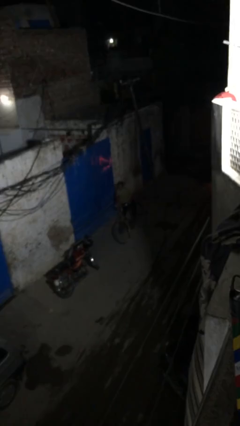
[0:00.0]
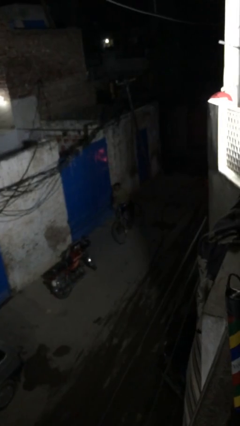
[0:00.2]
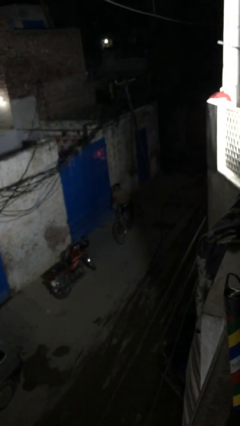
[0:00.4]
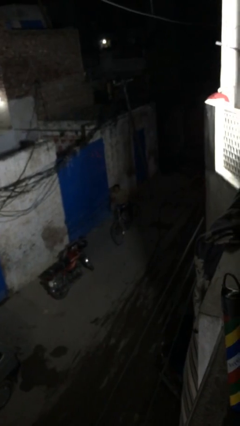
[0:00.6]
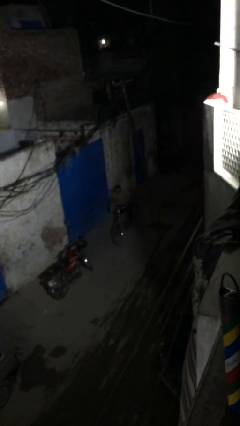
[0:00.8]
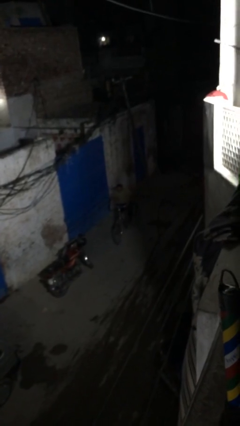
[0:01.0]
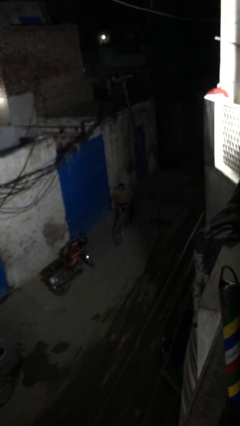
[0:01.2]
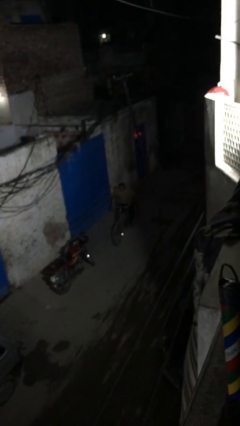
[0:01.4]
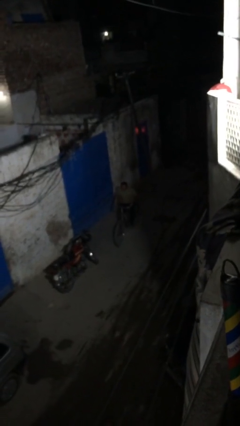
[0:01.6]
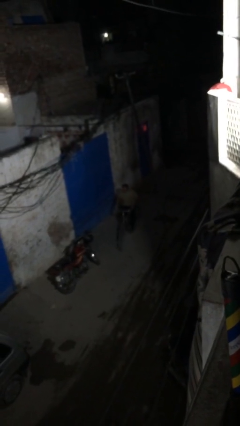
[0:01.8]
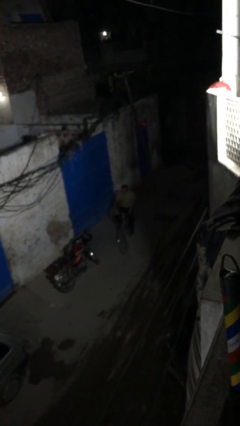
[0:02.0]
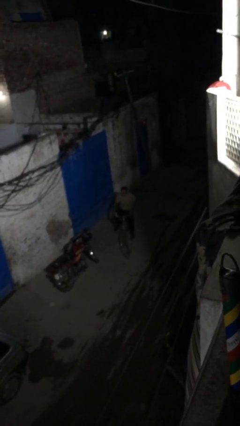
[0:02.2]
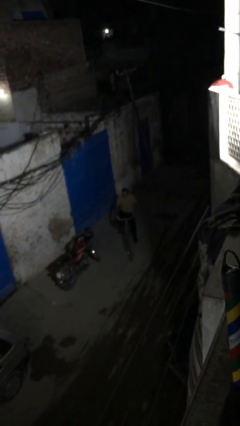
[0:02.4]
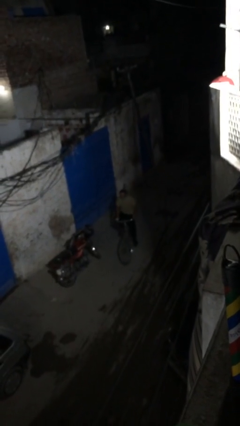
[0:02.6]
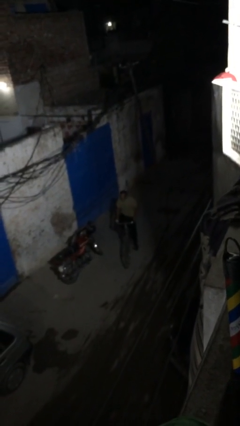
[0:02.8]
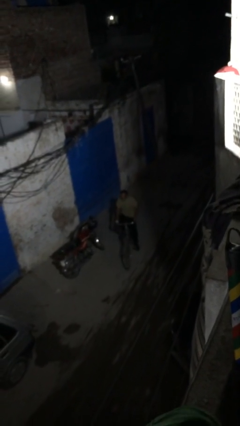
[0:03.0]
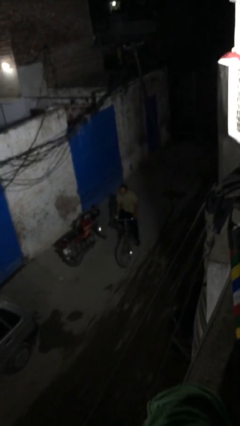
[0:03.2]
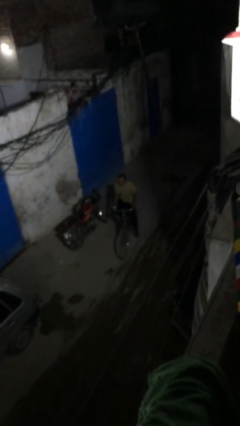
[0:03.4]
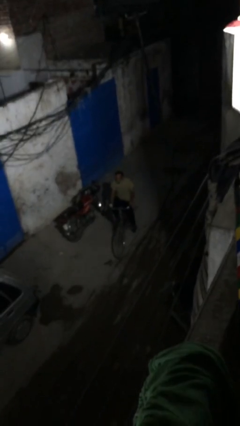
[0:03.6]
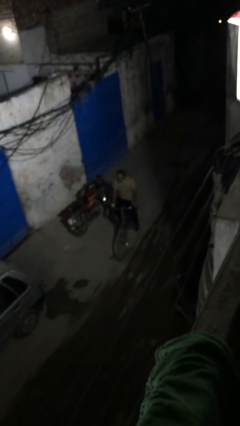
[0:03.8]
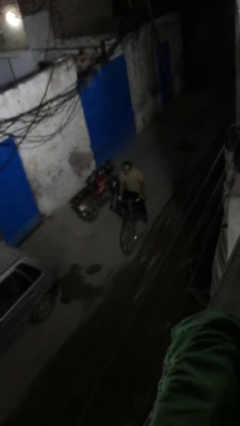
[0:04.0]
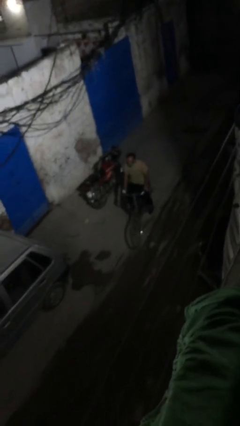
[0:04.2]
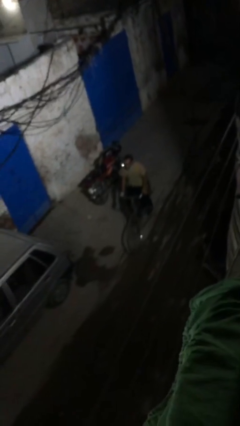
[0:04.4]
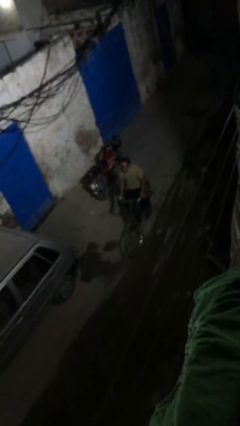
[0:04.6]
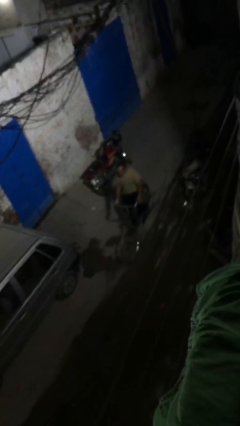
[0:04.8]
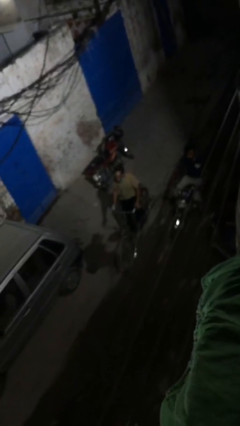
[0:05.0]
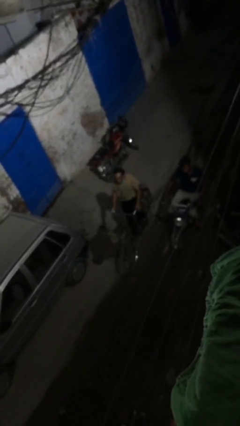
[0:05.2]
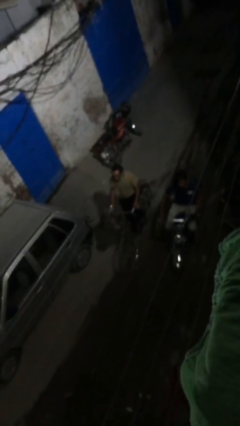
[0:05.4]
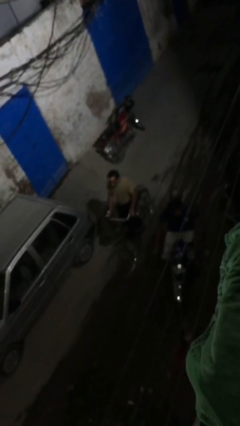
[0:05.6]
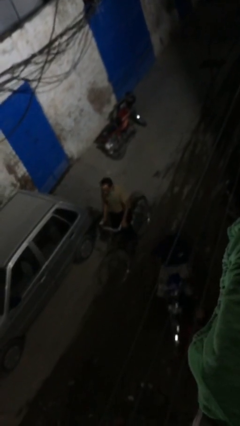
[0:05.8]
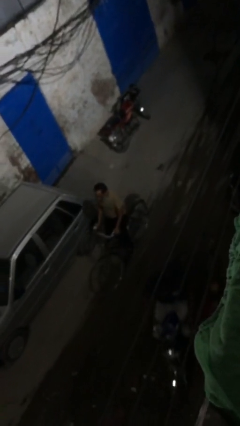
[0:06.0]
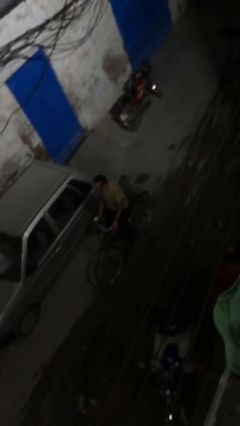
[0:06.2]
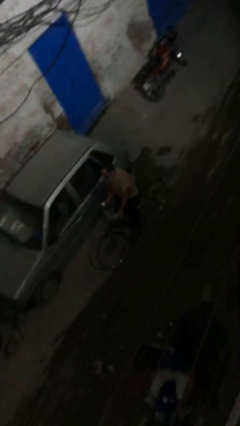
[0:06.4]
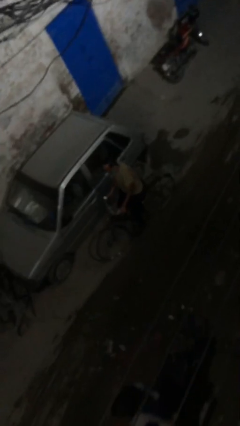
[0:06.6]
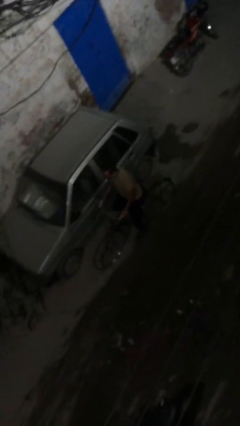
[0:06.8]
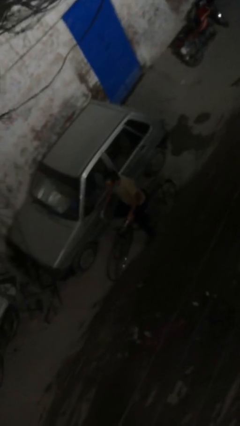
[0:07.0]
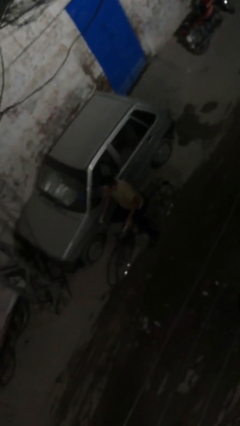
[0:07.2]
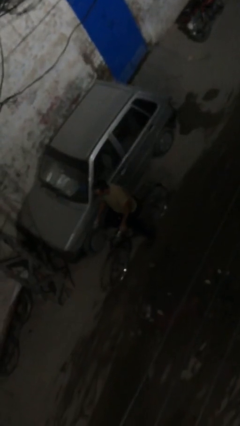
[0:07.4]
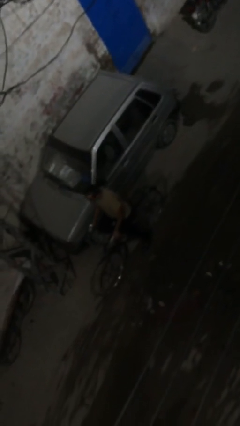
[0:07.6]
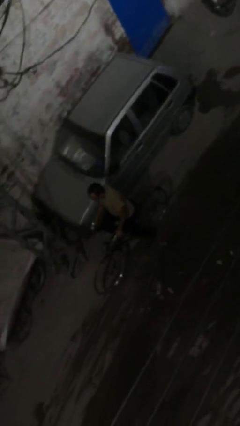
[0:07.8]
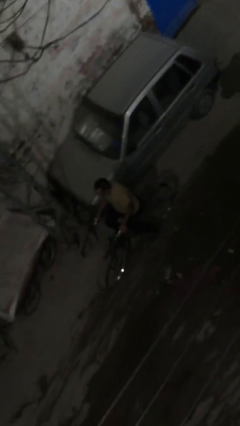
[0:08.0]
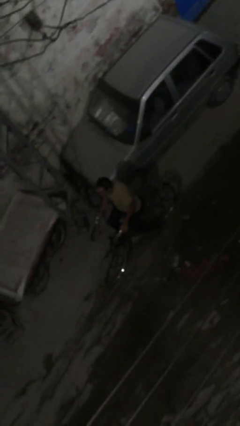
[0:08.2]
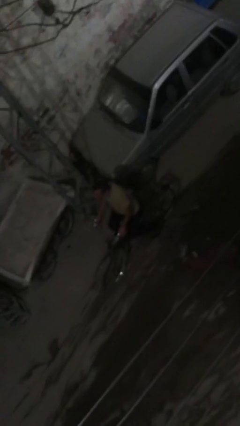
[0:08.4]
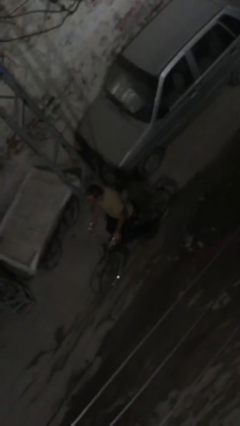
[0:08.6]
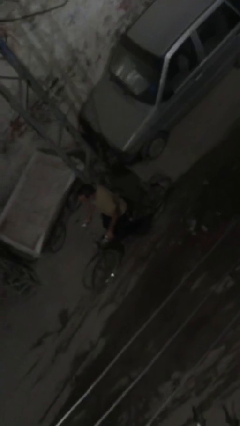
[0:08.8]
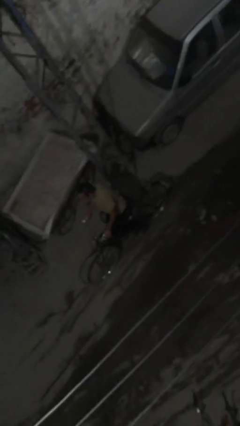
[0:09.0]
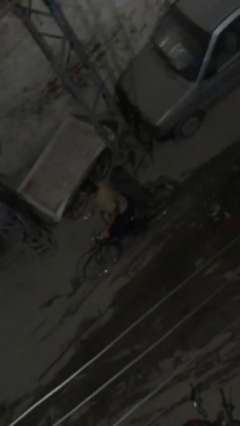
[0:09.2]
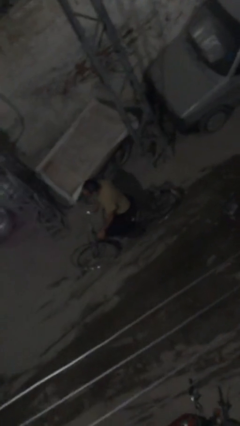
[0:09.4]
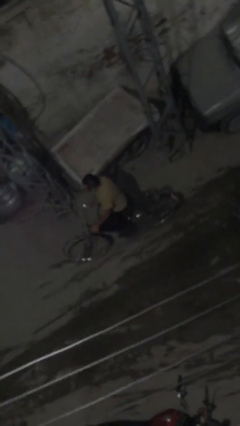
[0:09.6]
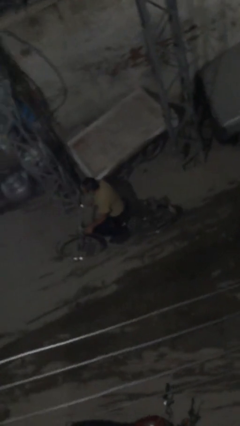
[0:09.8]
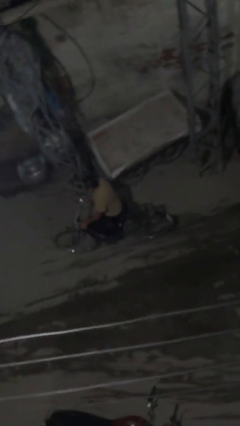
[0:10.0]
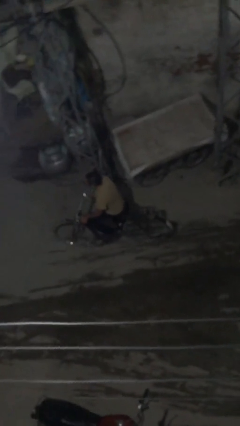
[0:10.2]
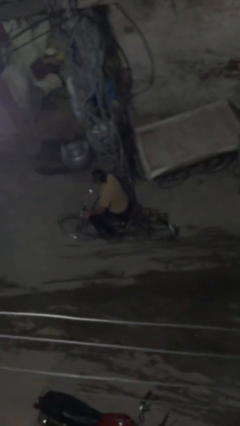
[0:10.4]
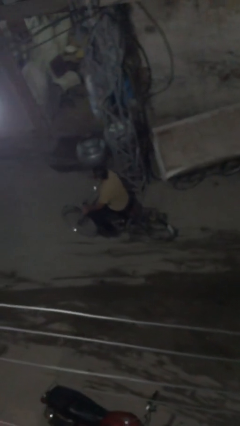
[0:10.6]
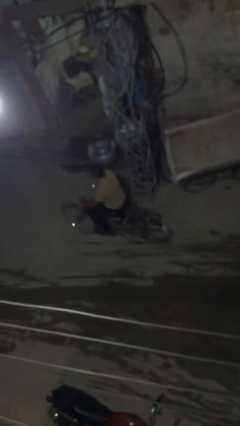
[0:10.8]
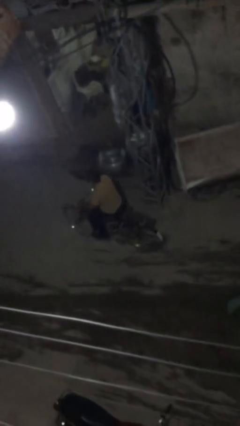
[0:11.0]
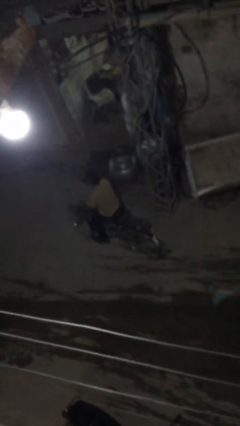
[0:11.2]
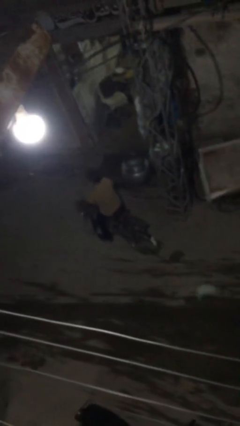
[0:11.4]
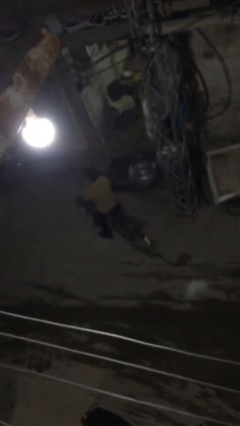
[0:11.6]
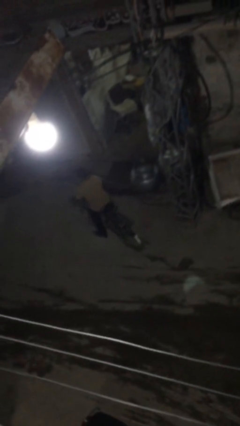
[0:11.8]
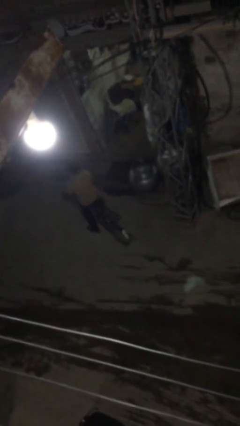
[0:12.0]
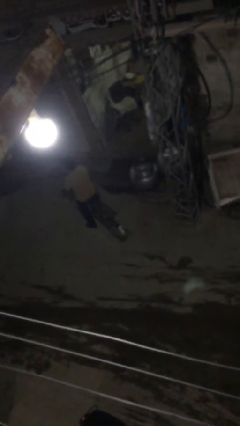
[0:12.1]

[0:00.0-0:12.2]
person rides bicycle

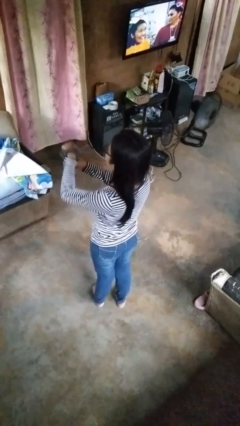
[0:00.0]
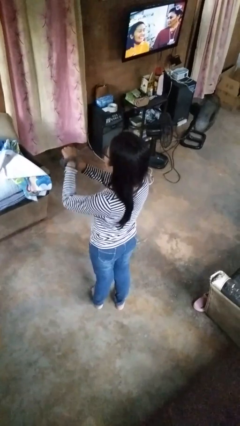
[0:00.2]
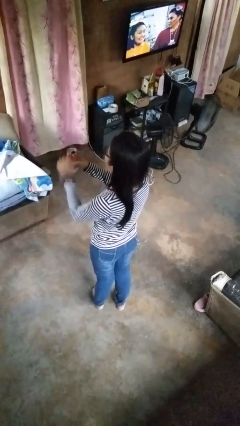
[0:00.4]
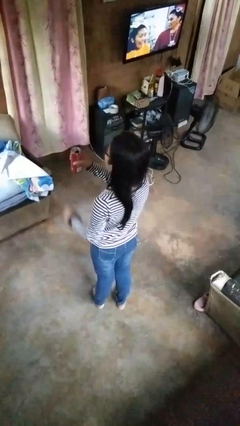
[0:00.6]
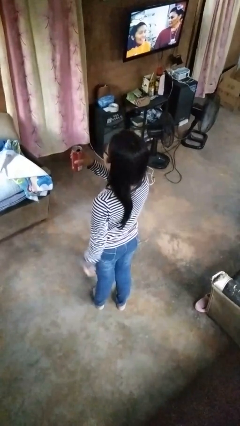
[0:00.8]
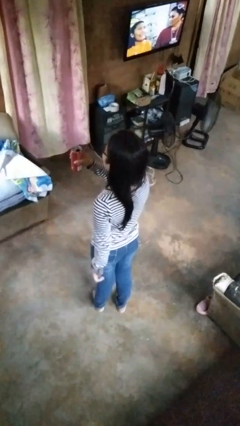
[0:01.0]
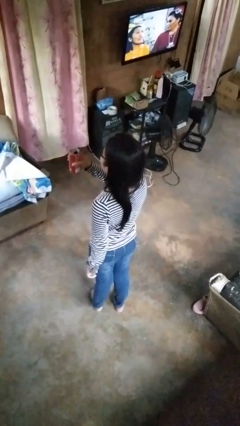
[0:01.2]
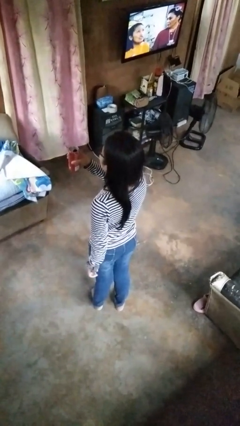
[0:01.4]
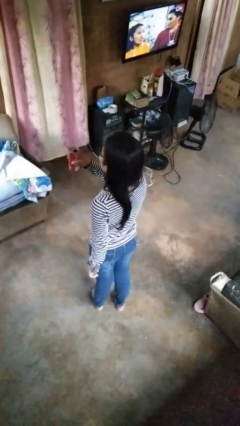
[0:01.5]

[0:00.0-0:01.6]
person opens beverage can

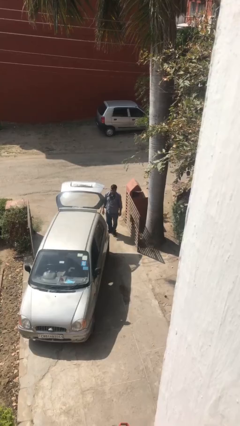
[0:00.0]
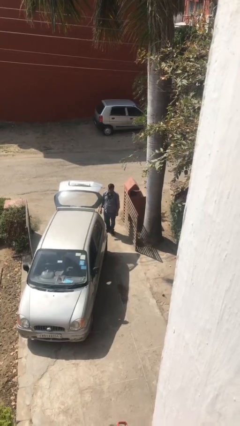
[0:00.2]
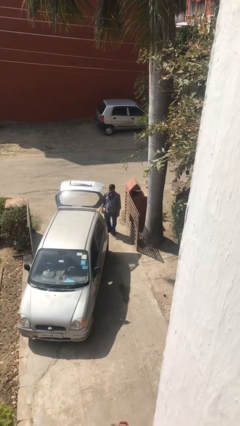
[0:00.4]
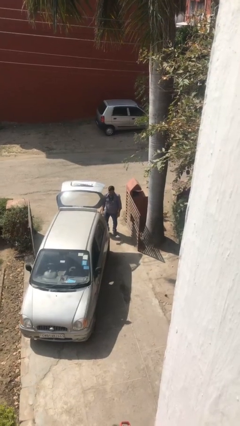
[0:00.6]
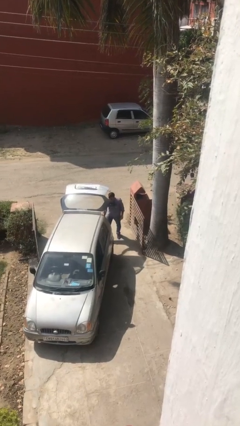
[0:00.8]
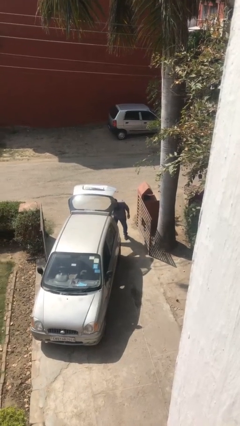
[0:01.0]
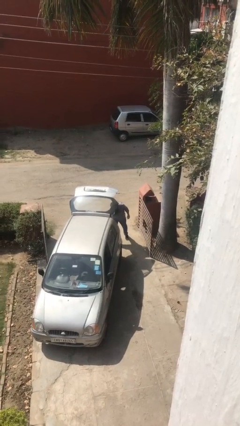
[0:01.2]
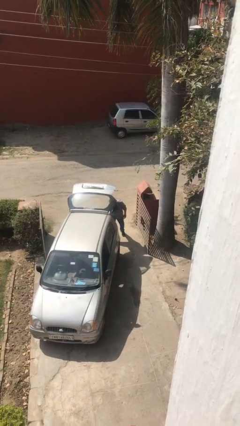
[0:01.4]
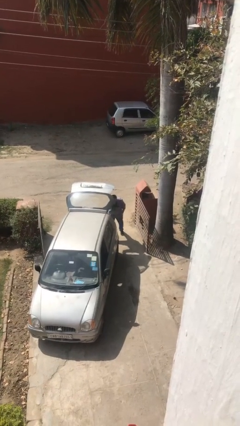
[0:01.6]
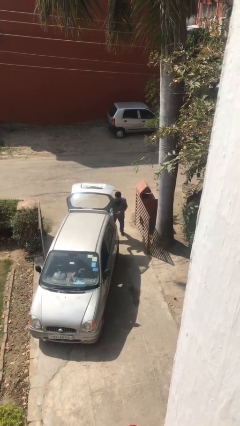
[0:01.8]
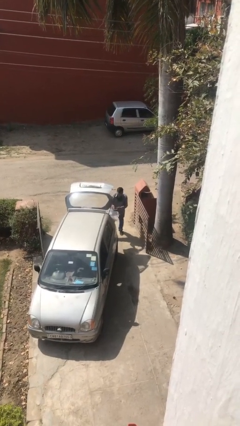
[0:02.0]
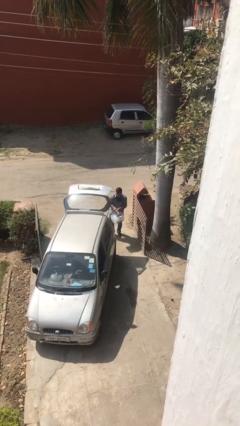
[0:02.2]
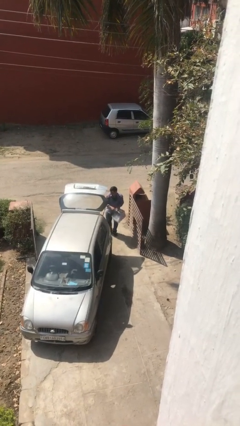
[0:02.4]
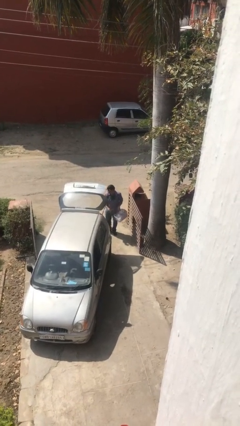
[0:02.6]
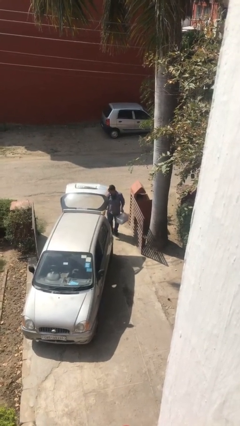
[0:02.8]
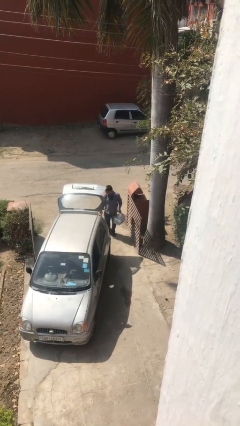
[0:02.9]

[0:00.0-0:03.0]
person unloads car

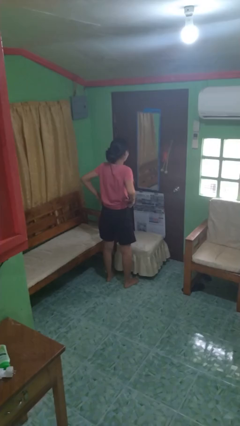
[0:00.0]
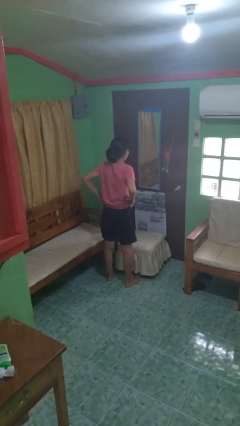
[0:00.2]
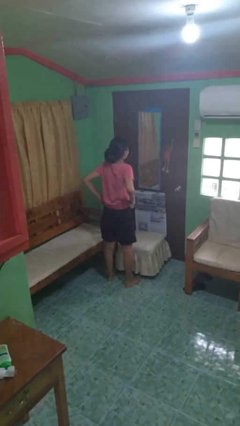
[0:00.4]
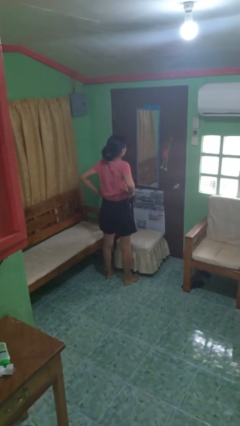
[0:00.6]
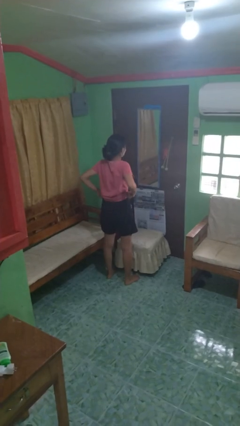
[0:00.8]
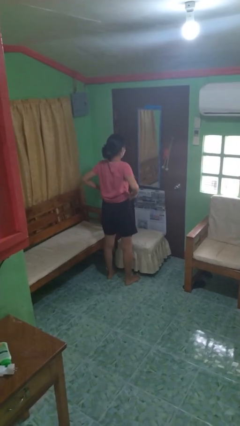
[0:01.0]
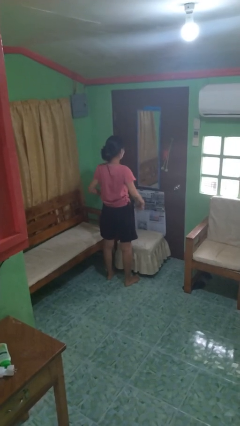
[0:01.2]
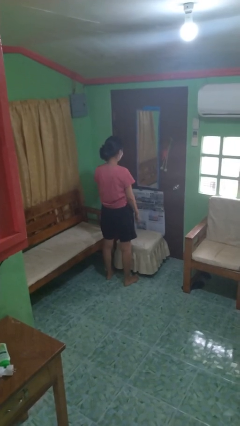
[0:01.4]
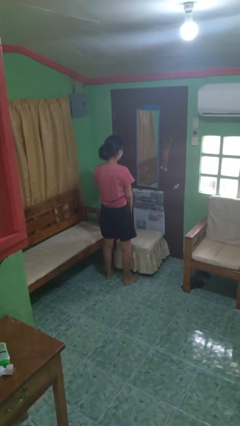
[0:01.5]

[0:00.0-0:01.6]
person hikes up pants
